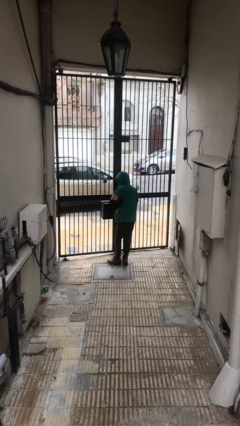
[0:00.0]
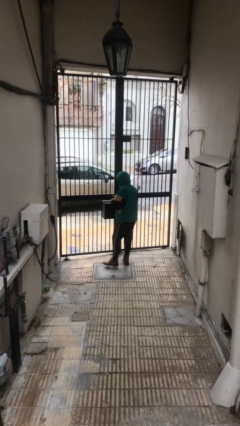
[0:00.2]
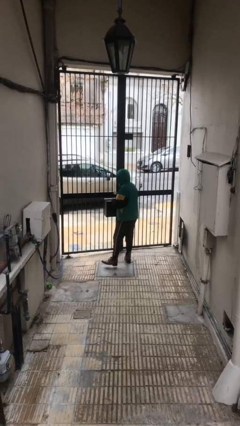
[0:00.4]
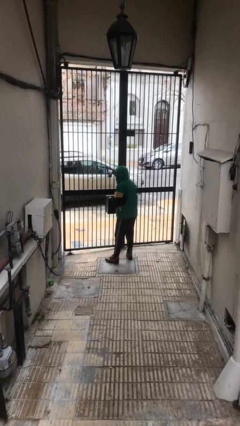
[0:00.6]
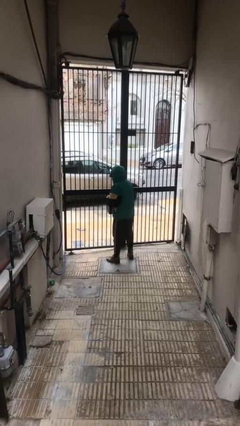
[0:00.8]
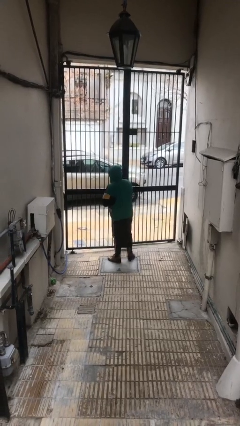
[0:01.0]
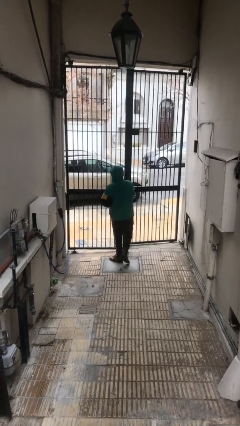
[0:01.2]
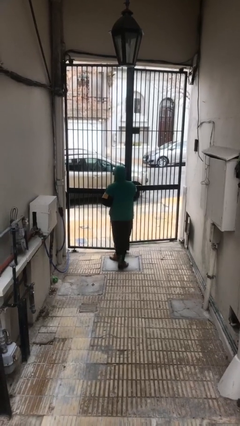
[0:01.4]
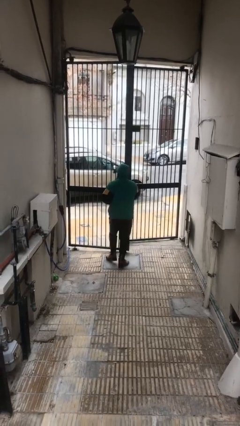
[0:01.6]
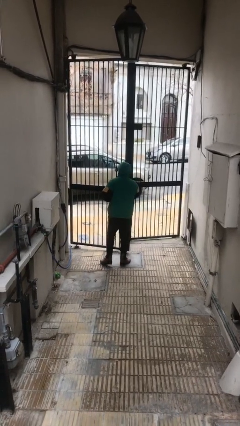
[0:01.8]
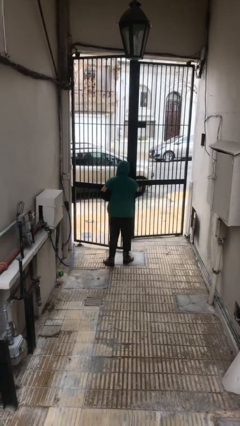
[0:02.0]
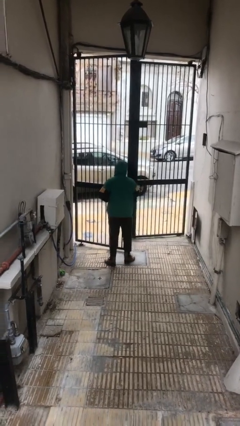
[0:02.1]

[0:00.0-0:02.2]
person opens gate

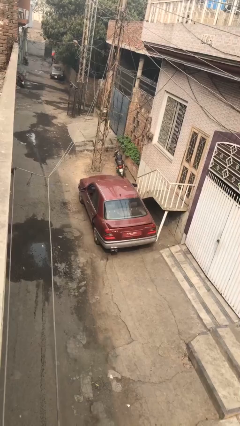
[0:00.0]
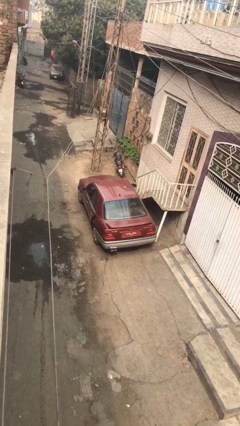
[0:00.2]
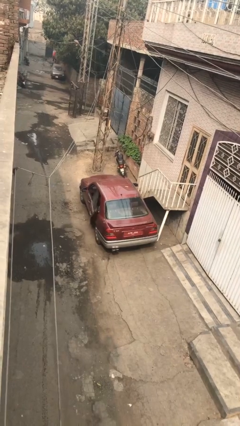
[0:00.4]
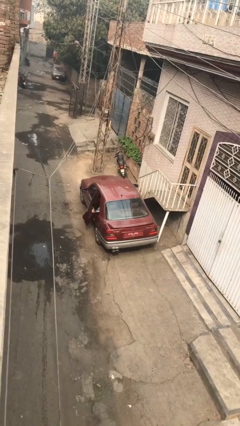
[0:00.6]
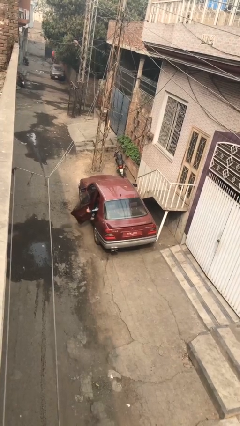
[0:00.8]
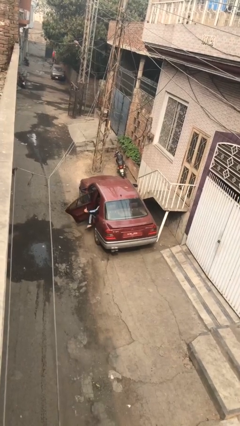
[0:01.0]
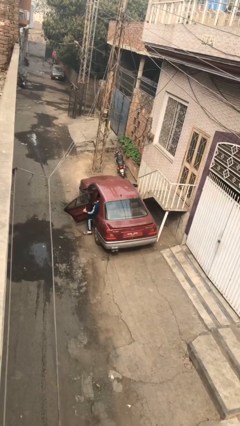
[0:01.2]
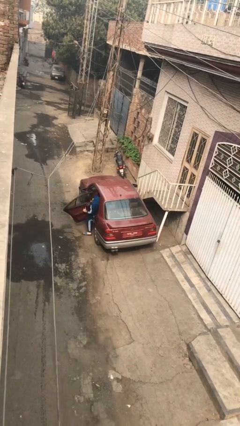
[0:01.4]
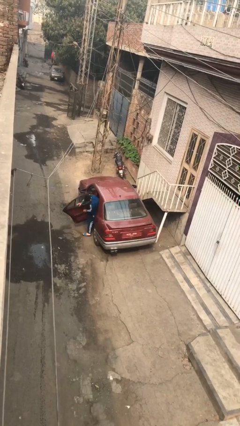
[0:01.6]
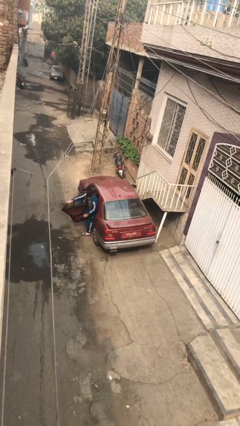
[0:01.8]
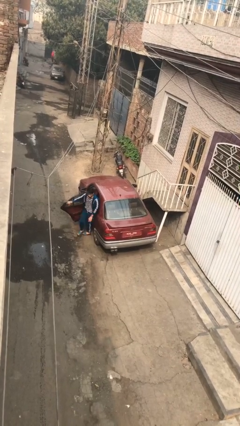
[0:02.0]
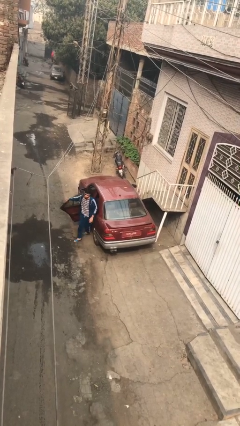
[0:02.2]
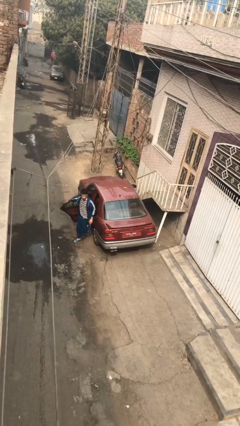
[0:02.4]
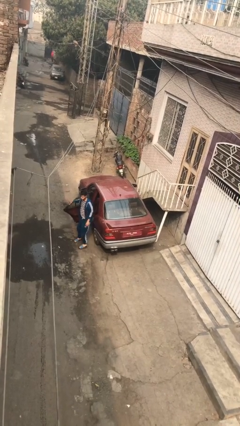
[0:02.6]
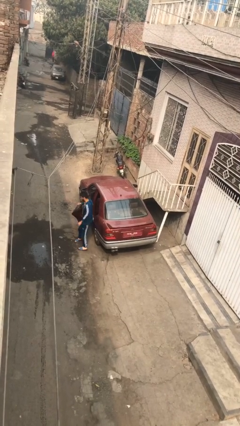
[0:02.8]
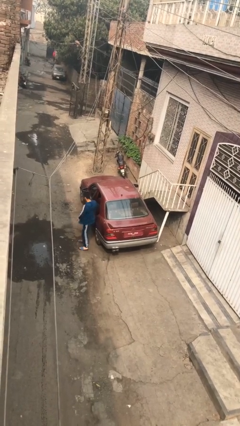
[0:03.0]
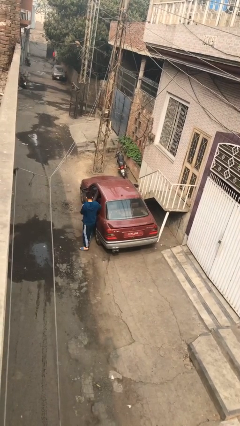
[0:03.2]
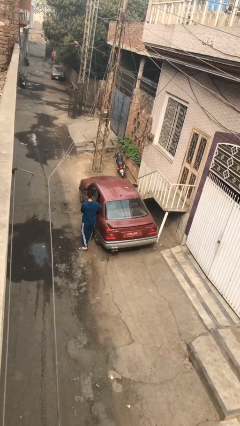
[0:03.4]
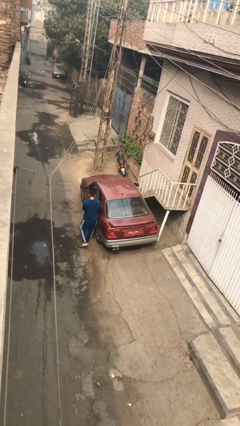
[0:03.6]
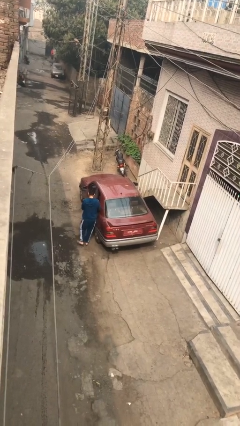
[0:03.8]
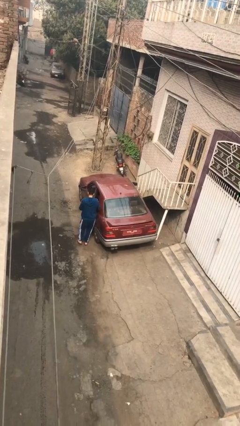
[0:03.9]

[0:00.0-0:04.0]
car drops off person

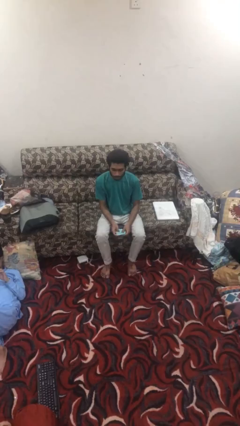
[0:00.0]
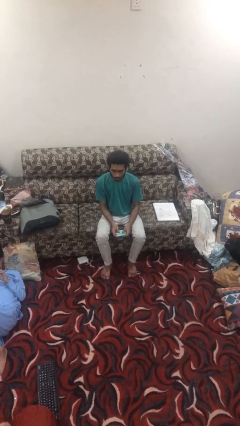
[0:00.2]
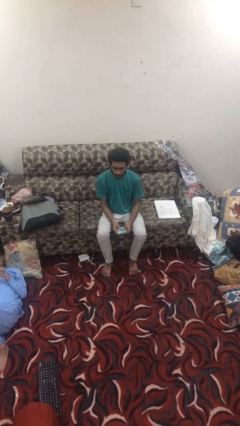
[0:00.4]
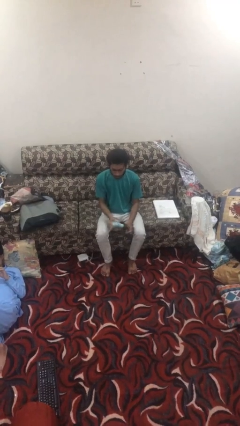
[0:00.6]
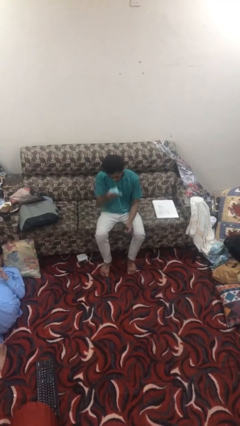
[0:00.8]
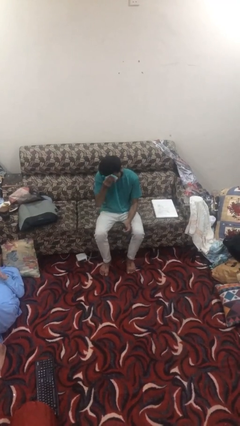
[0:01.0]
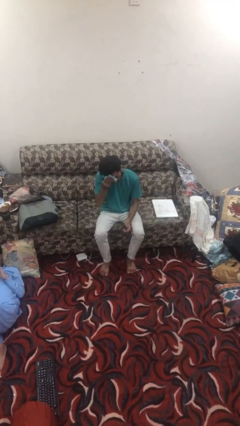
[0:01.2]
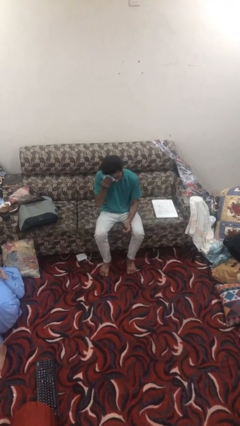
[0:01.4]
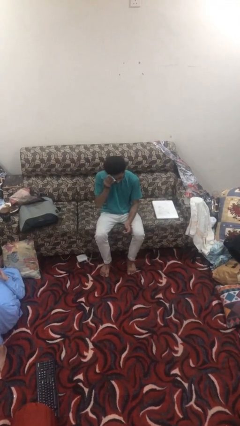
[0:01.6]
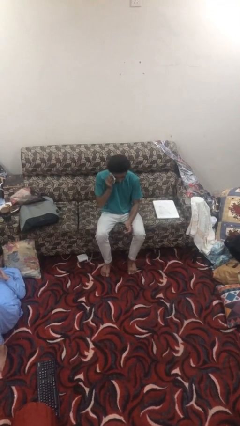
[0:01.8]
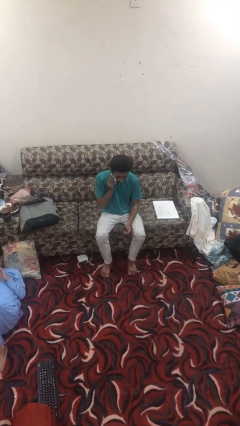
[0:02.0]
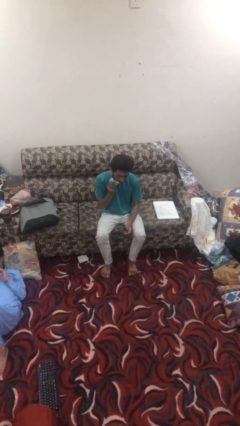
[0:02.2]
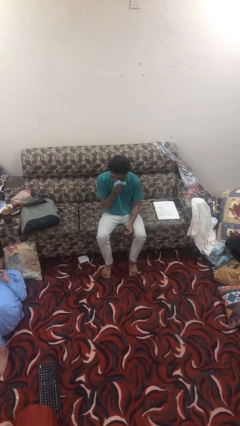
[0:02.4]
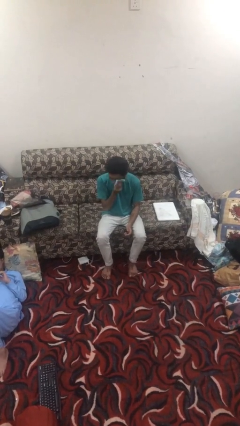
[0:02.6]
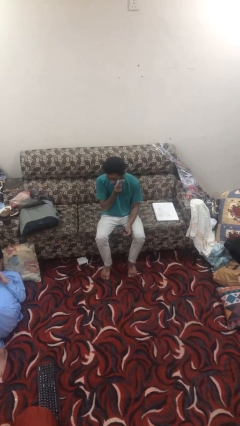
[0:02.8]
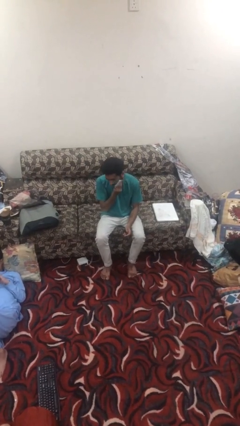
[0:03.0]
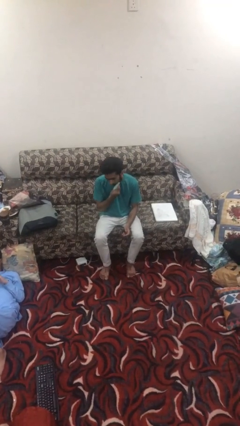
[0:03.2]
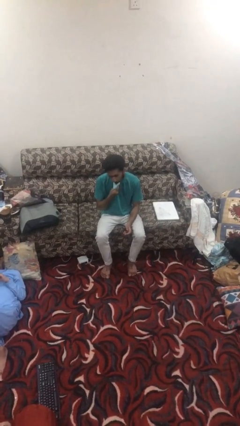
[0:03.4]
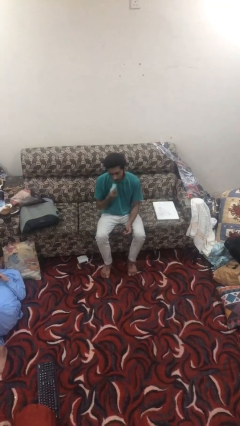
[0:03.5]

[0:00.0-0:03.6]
person wipes mouth with napkin

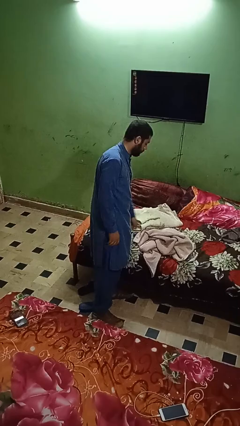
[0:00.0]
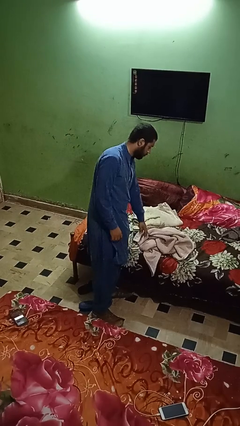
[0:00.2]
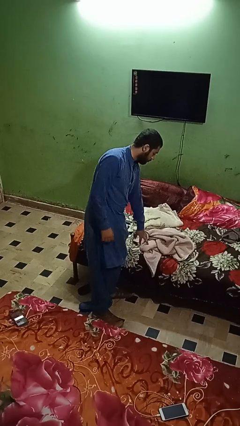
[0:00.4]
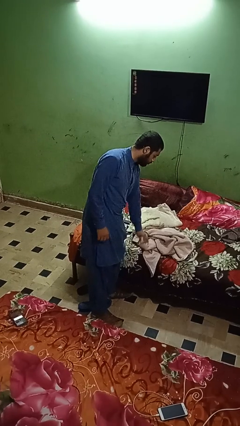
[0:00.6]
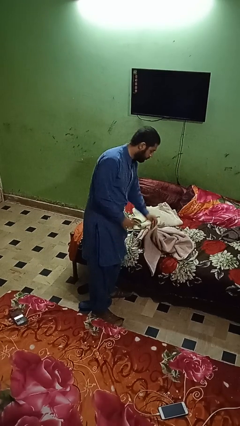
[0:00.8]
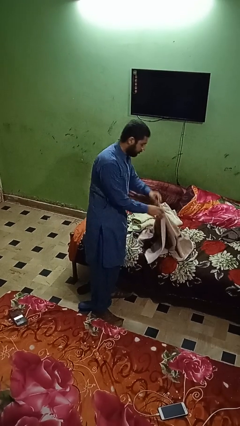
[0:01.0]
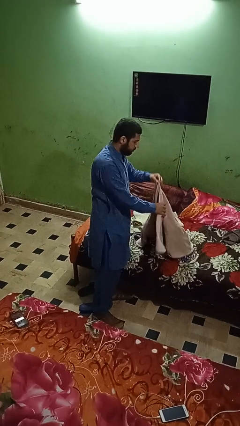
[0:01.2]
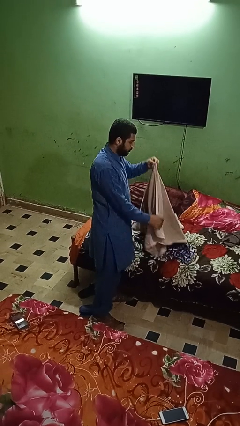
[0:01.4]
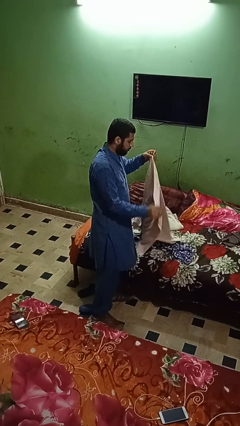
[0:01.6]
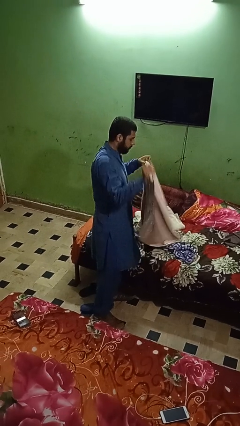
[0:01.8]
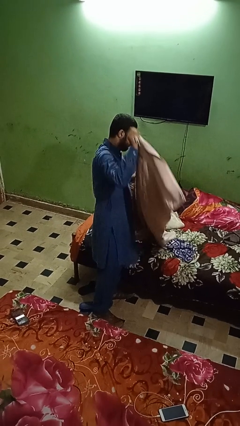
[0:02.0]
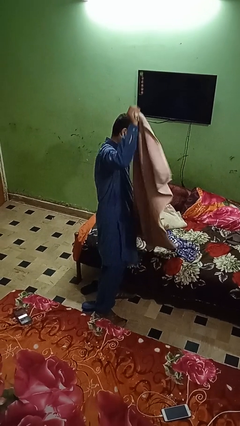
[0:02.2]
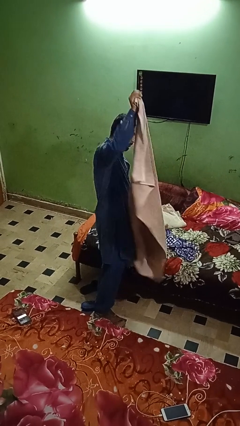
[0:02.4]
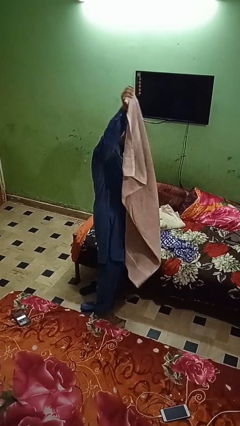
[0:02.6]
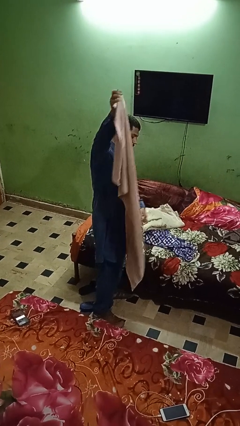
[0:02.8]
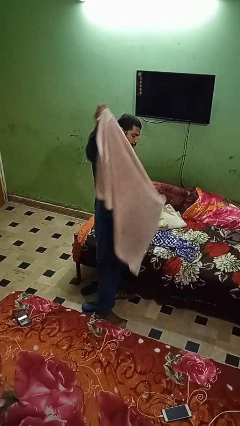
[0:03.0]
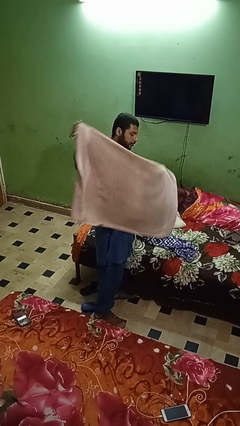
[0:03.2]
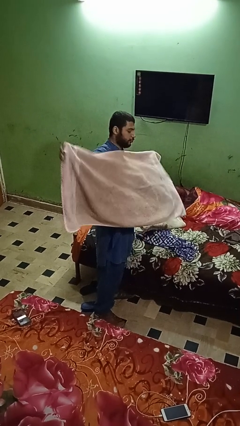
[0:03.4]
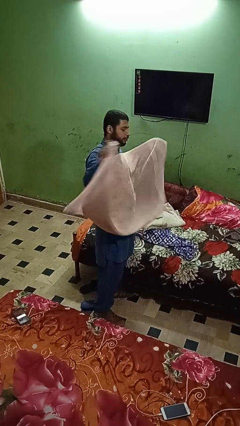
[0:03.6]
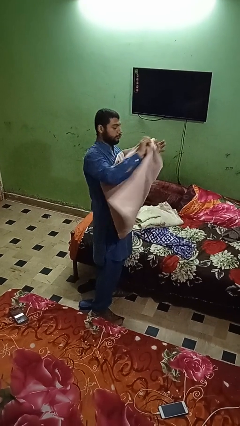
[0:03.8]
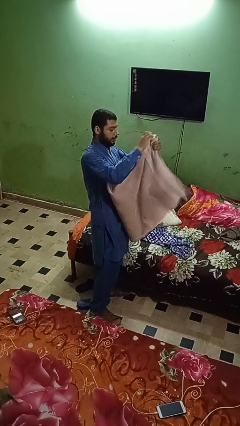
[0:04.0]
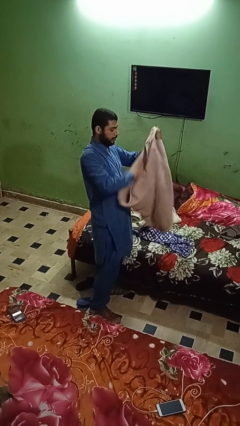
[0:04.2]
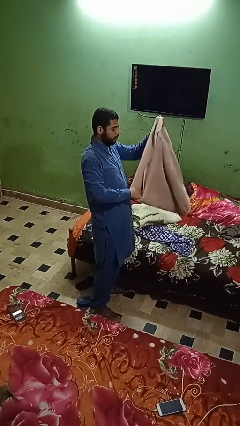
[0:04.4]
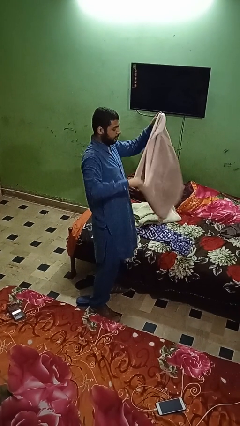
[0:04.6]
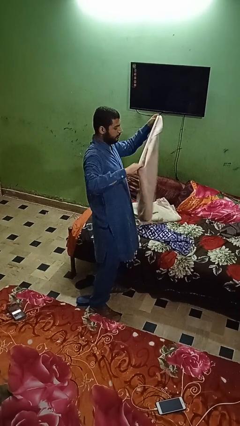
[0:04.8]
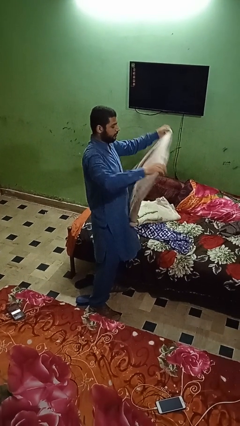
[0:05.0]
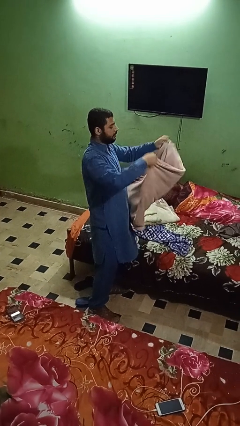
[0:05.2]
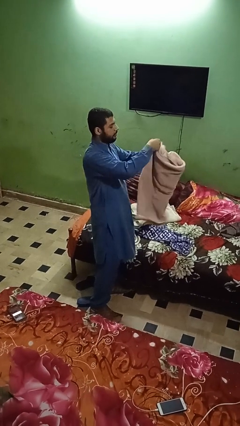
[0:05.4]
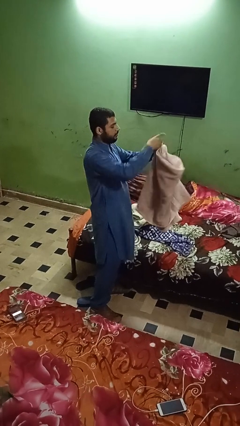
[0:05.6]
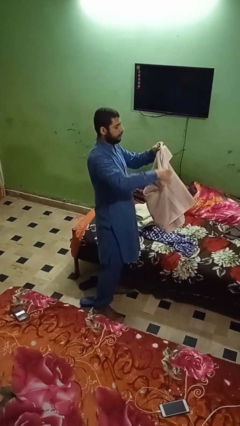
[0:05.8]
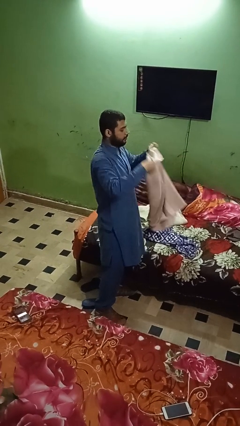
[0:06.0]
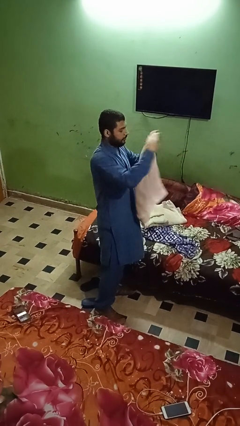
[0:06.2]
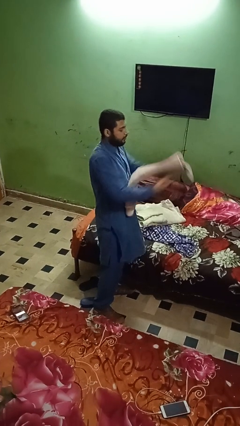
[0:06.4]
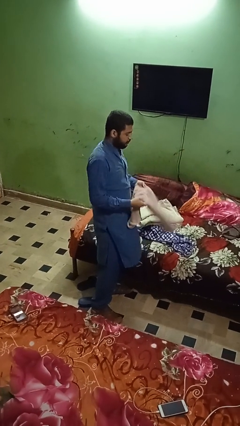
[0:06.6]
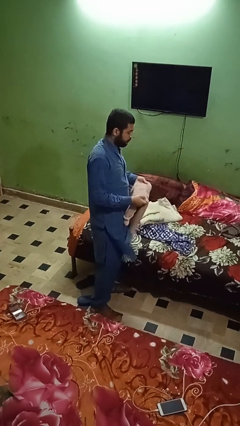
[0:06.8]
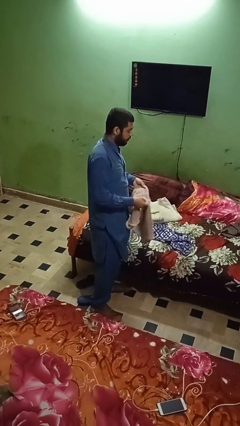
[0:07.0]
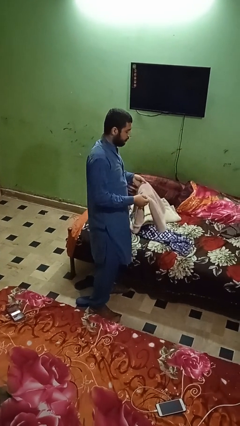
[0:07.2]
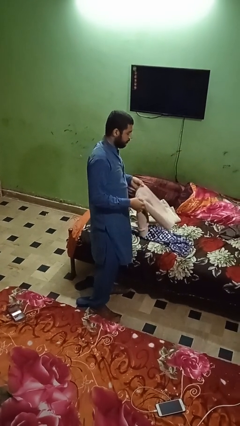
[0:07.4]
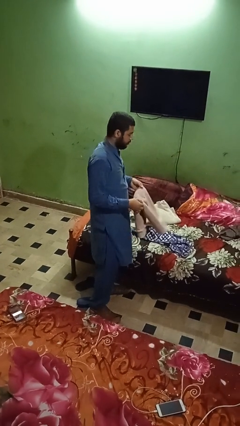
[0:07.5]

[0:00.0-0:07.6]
person folds towel

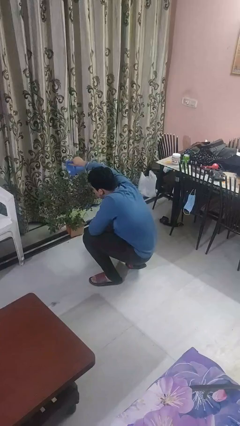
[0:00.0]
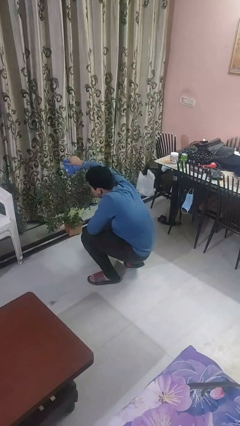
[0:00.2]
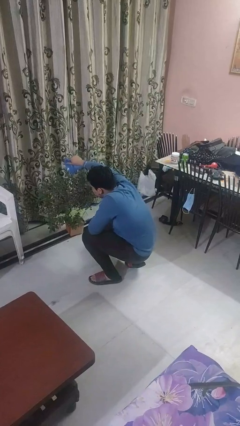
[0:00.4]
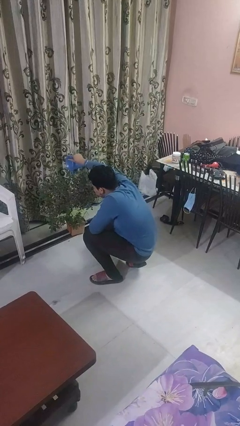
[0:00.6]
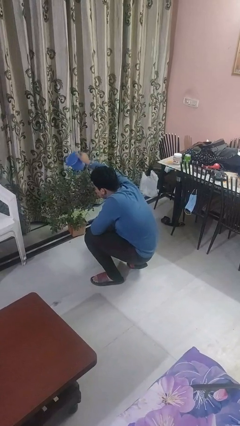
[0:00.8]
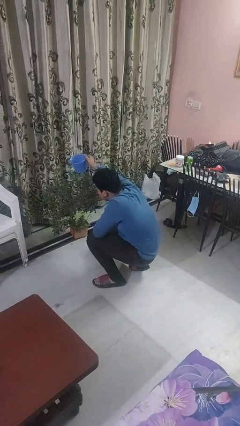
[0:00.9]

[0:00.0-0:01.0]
person waters houseplant
